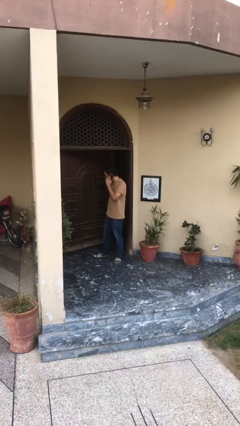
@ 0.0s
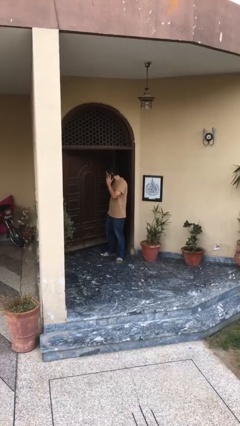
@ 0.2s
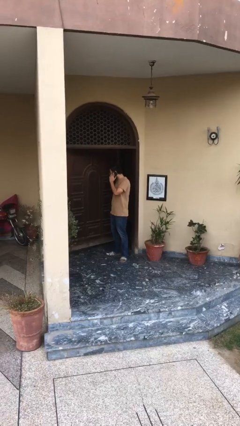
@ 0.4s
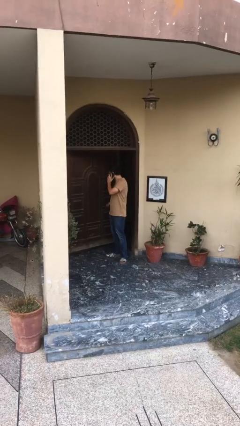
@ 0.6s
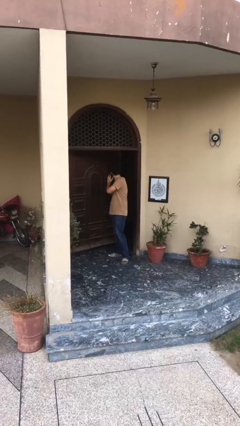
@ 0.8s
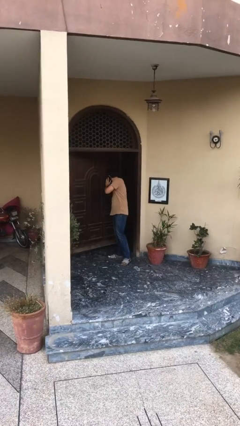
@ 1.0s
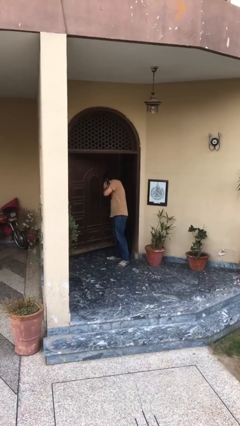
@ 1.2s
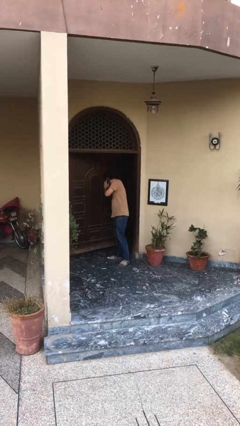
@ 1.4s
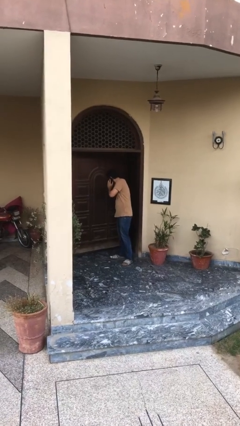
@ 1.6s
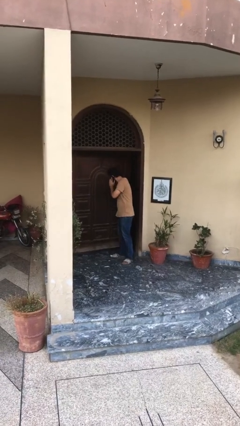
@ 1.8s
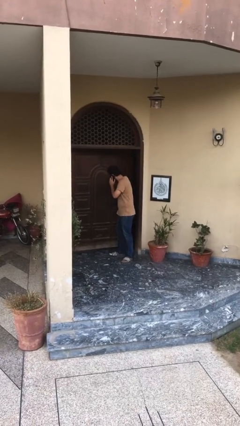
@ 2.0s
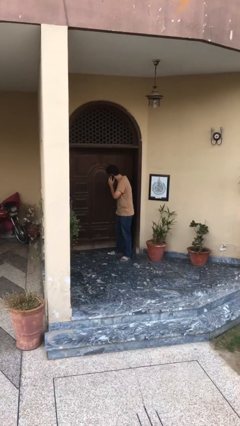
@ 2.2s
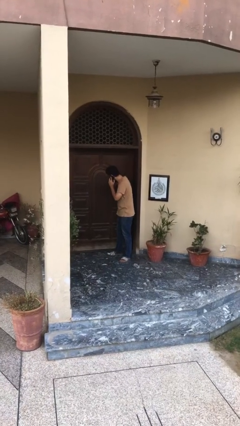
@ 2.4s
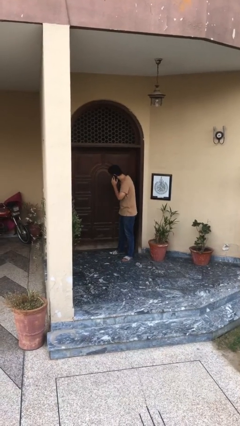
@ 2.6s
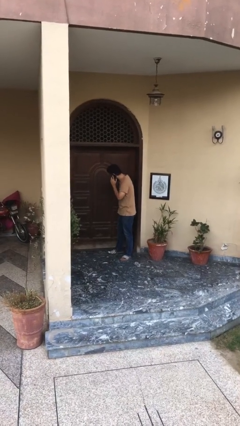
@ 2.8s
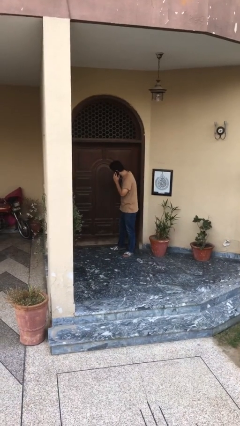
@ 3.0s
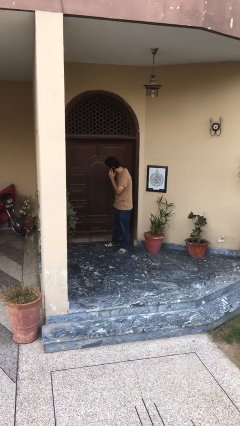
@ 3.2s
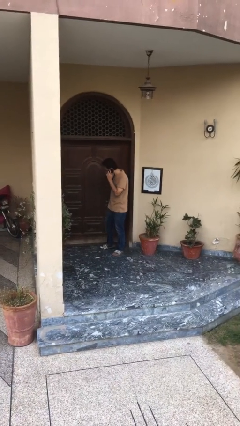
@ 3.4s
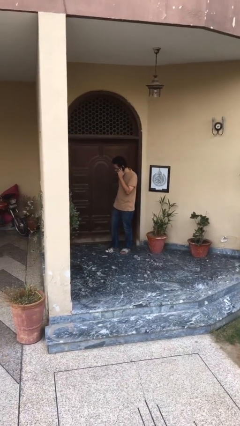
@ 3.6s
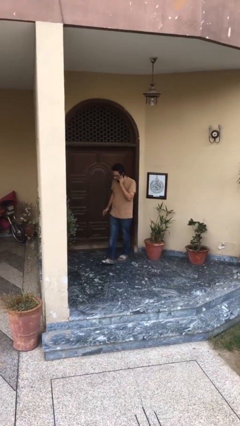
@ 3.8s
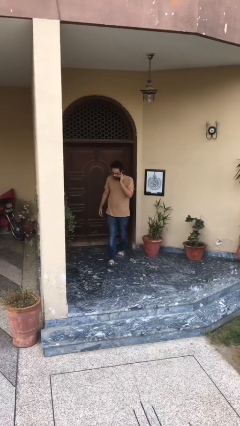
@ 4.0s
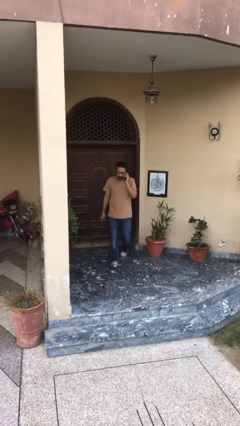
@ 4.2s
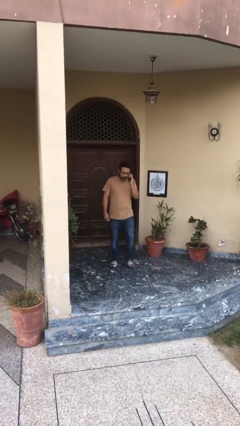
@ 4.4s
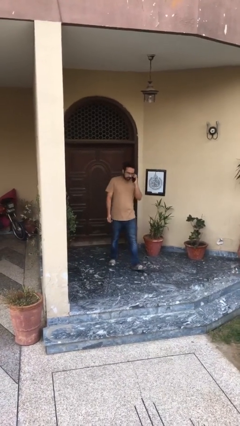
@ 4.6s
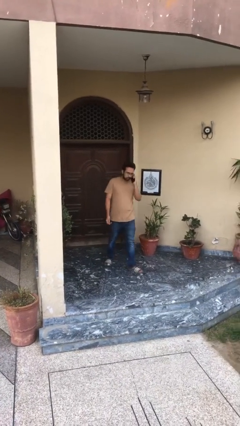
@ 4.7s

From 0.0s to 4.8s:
person closes facility door

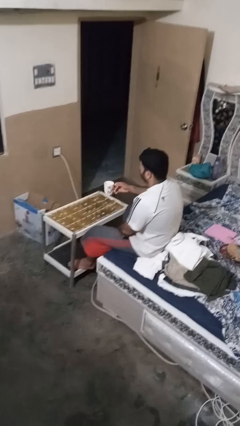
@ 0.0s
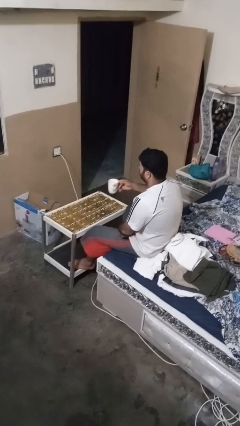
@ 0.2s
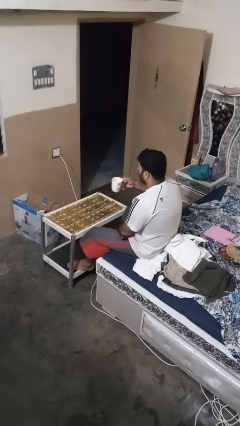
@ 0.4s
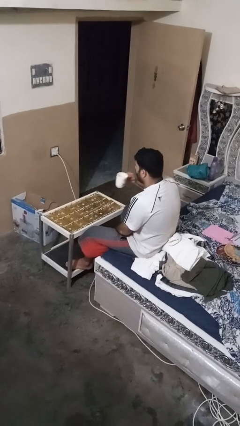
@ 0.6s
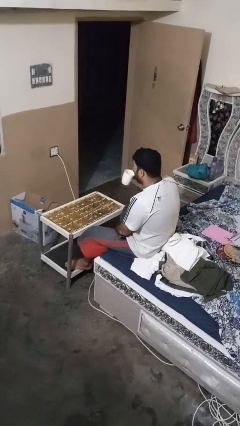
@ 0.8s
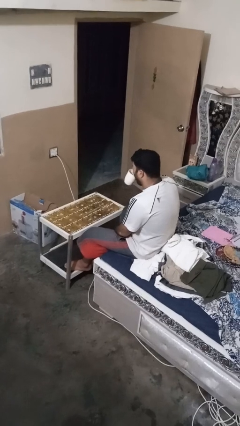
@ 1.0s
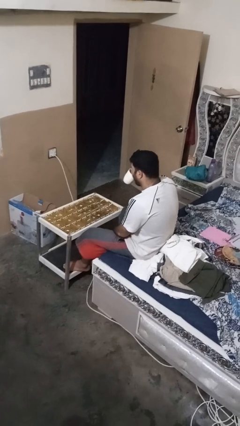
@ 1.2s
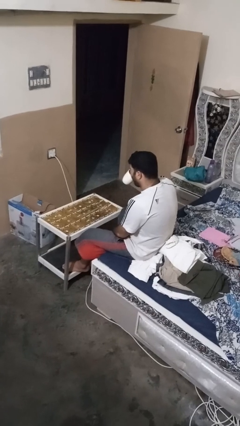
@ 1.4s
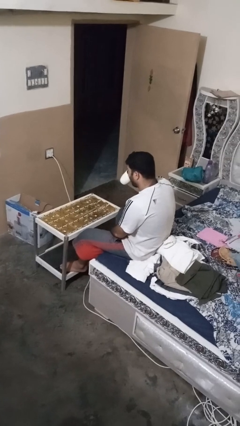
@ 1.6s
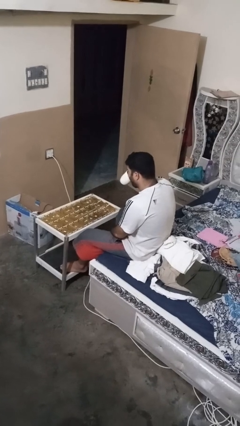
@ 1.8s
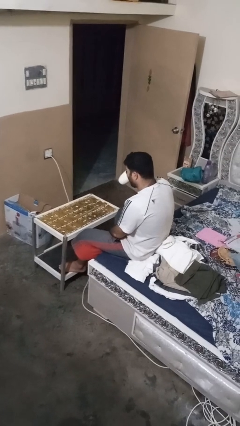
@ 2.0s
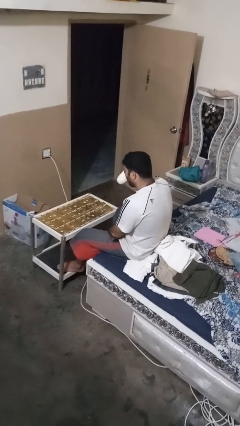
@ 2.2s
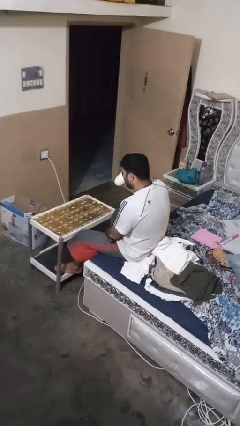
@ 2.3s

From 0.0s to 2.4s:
person drinks from mug

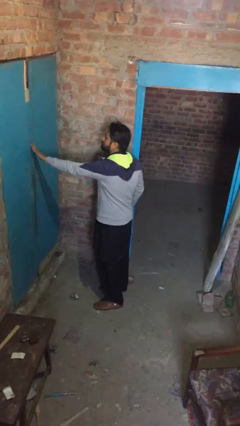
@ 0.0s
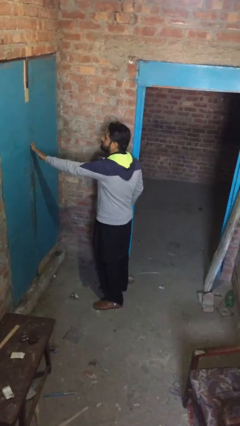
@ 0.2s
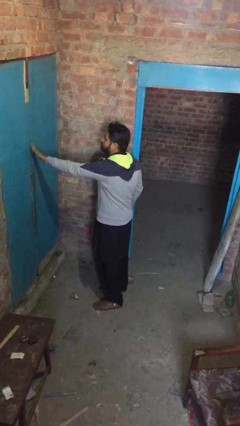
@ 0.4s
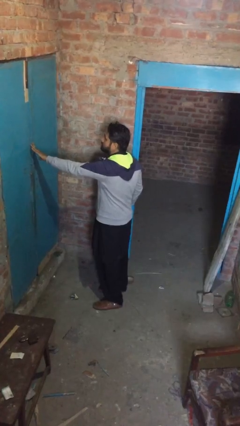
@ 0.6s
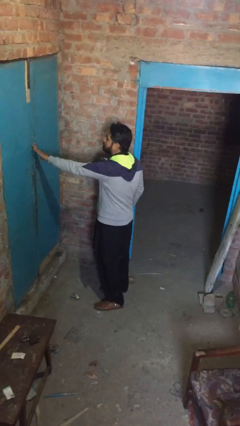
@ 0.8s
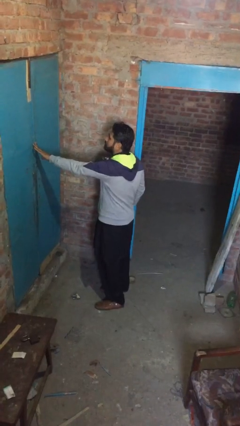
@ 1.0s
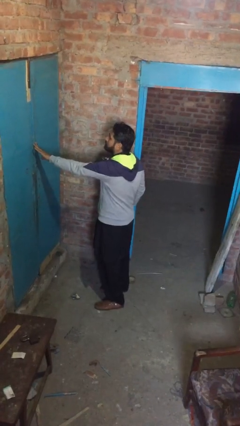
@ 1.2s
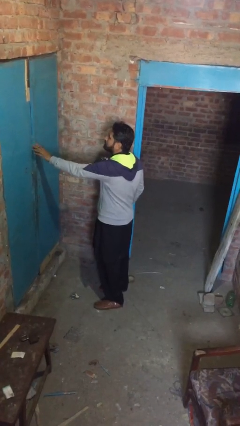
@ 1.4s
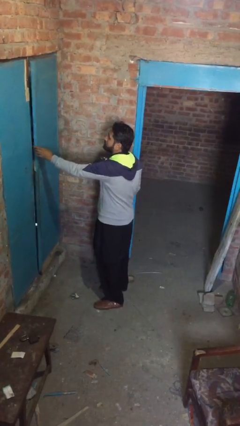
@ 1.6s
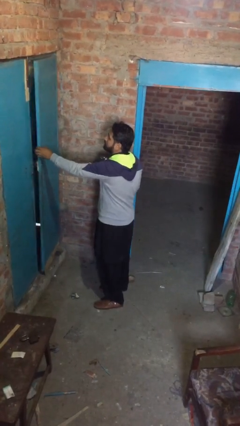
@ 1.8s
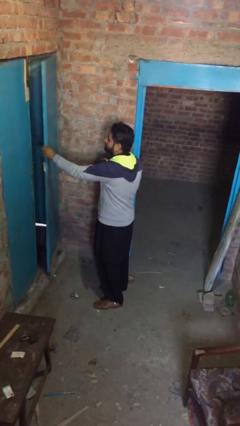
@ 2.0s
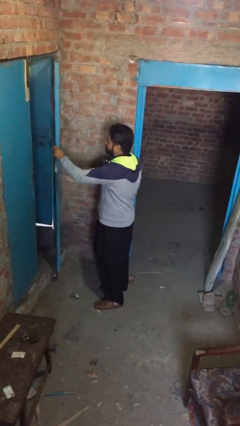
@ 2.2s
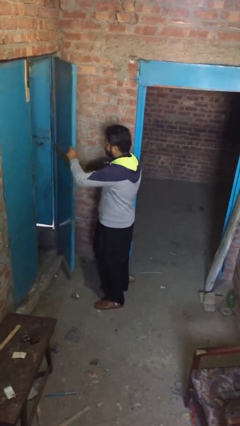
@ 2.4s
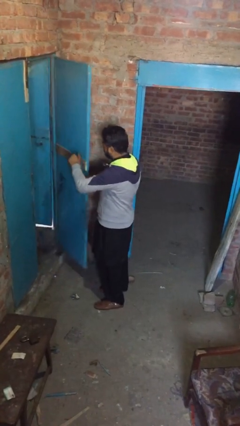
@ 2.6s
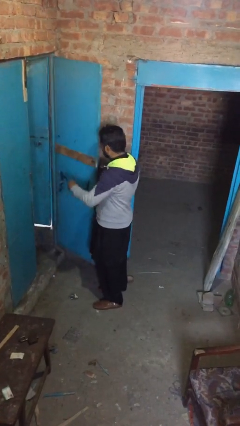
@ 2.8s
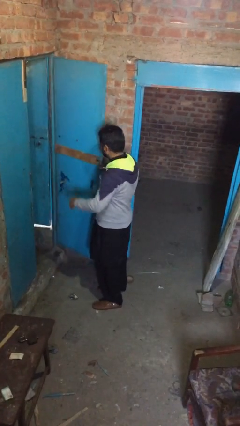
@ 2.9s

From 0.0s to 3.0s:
person opens facility door

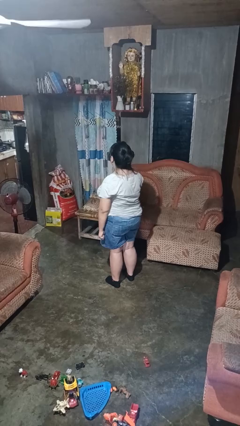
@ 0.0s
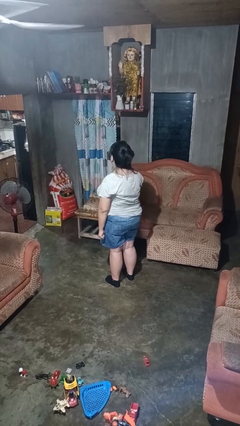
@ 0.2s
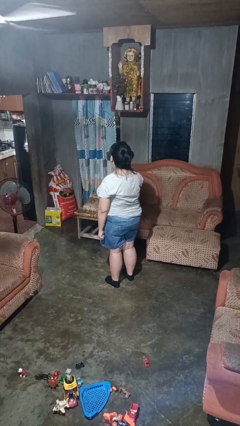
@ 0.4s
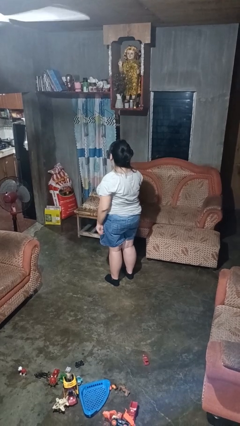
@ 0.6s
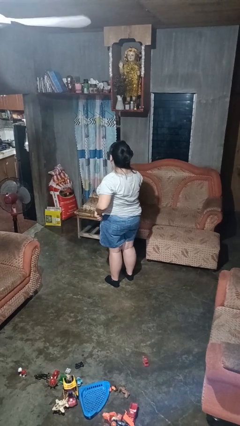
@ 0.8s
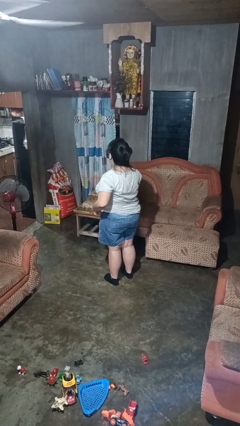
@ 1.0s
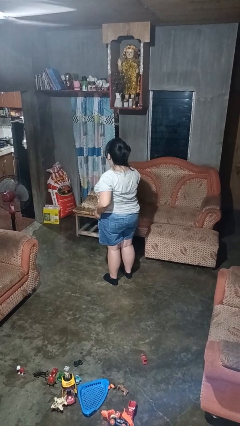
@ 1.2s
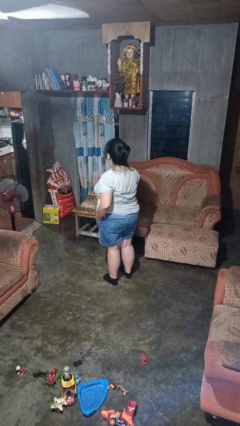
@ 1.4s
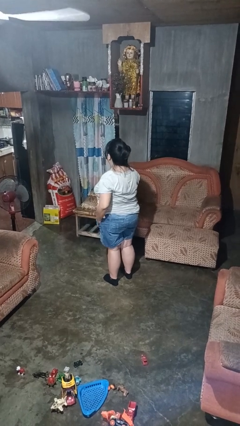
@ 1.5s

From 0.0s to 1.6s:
person puts hands in back pockets

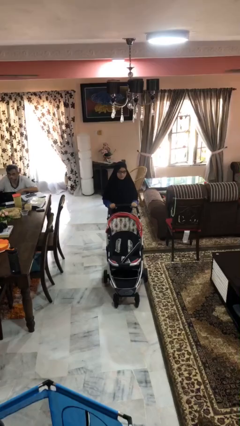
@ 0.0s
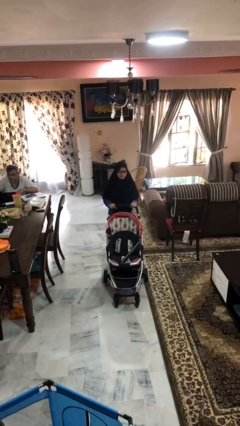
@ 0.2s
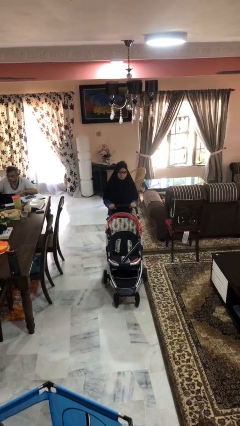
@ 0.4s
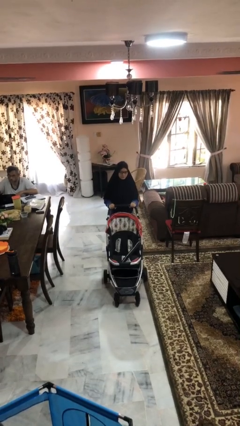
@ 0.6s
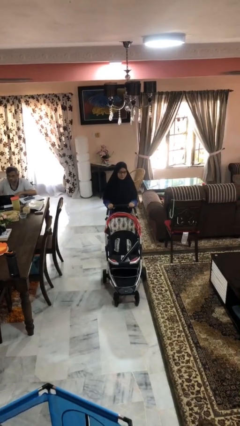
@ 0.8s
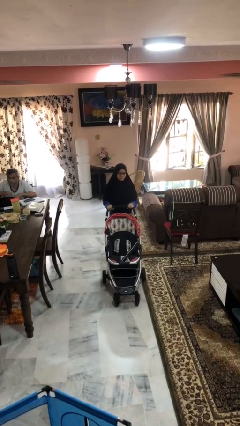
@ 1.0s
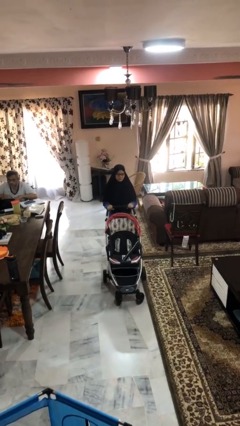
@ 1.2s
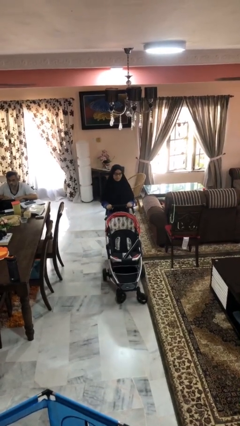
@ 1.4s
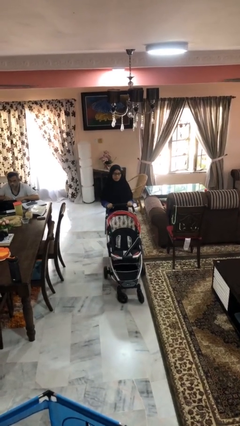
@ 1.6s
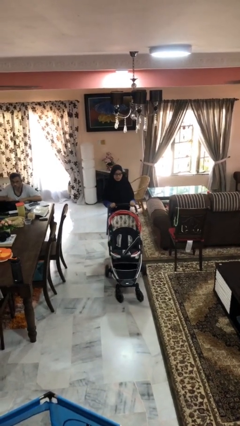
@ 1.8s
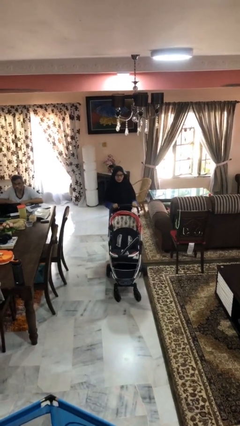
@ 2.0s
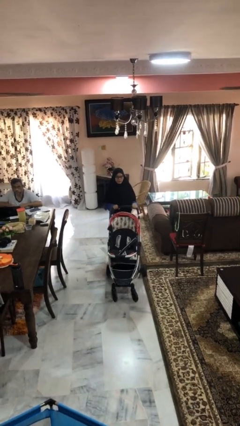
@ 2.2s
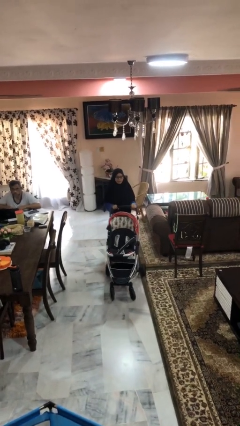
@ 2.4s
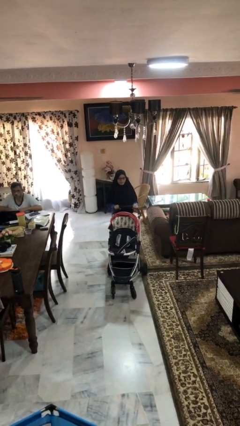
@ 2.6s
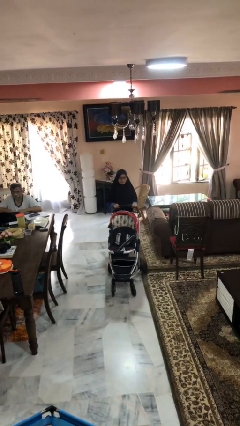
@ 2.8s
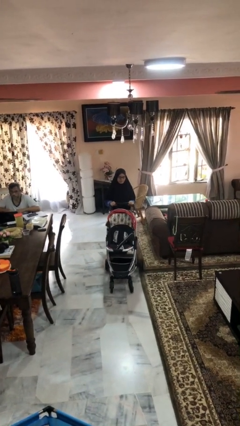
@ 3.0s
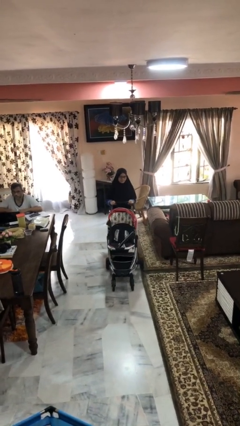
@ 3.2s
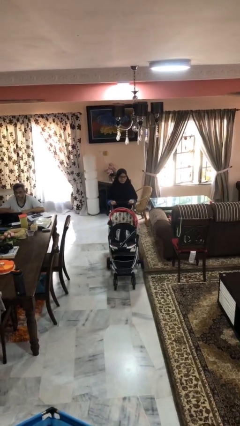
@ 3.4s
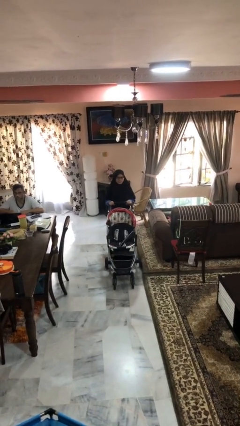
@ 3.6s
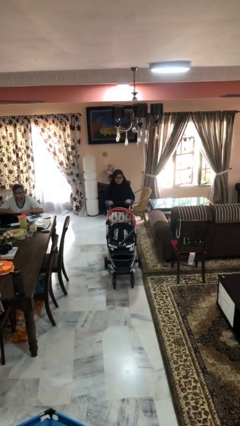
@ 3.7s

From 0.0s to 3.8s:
person pulls wheeled cart

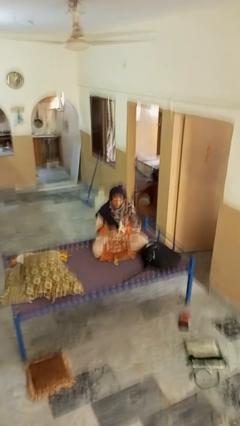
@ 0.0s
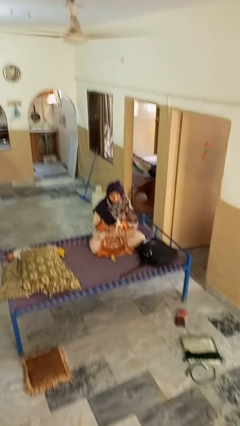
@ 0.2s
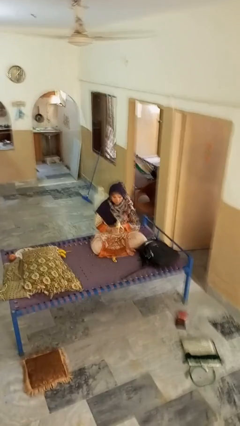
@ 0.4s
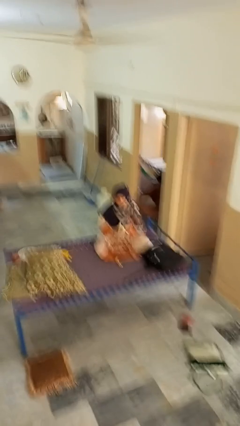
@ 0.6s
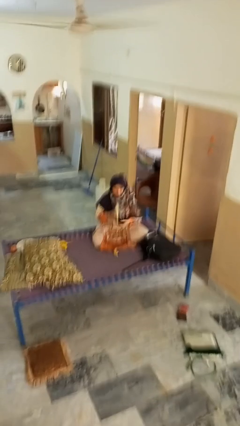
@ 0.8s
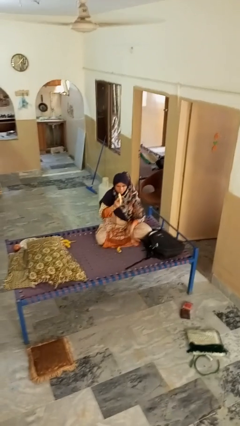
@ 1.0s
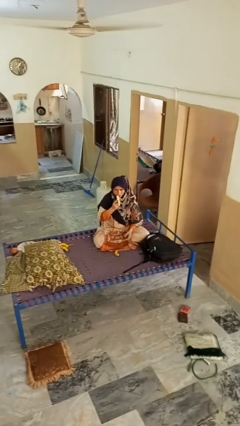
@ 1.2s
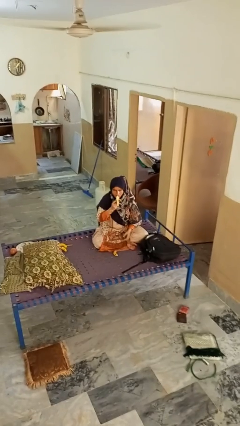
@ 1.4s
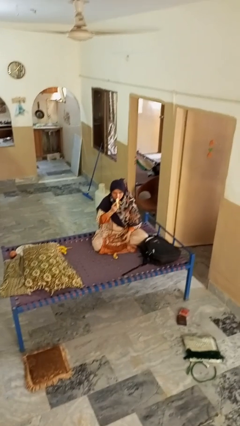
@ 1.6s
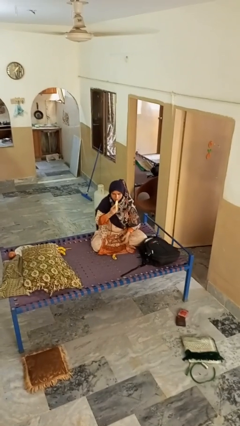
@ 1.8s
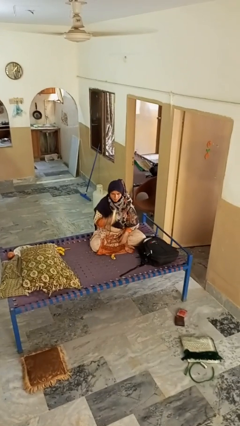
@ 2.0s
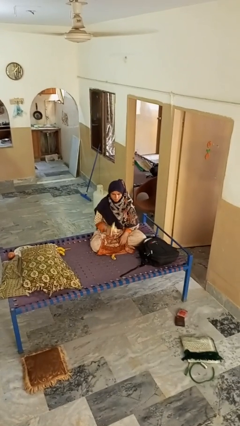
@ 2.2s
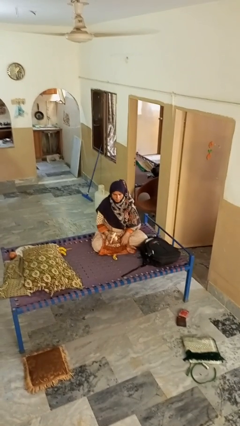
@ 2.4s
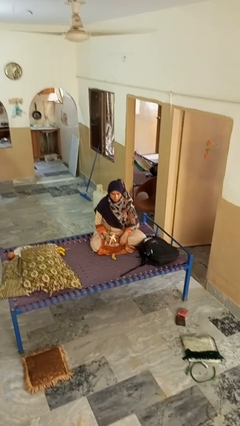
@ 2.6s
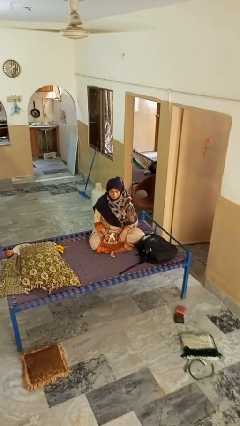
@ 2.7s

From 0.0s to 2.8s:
person eats banana
